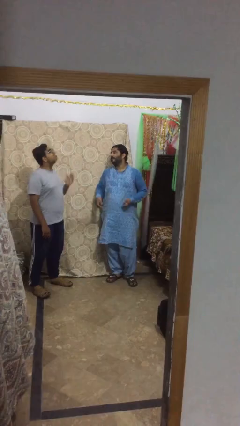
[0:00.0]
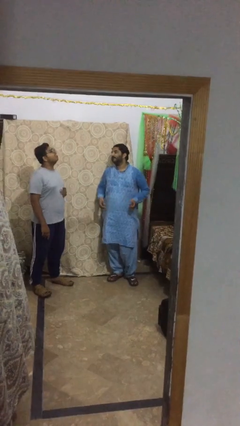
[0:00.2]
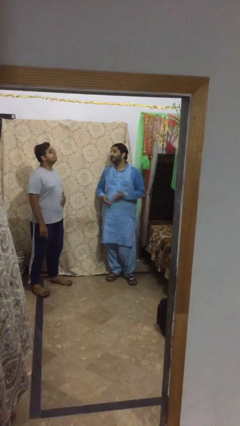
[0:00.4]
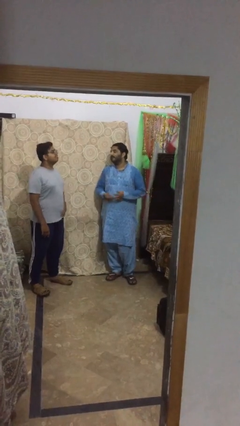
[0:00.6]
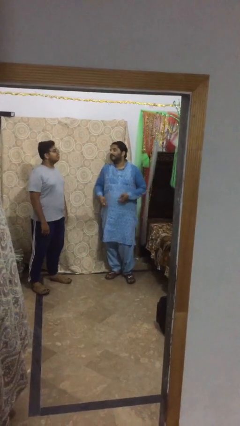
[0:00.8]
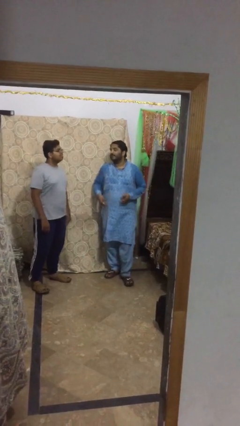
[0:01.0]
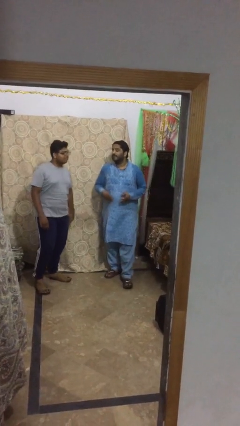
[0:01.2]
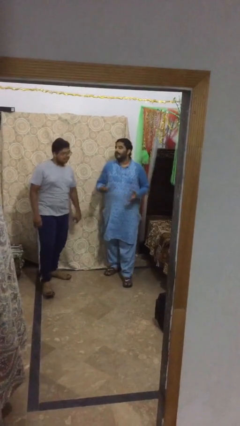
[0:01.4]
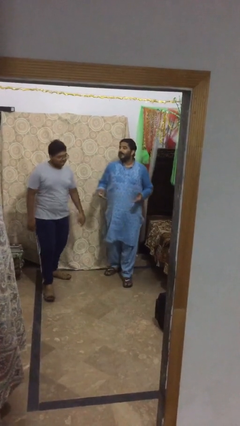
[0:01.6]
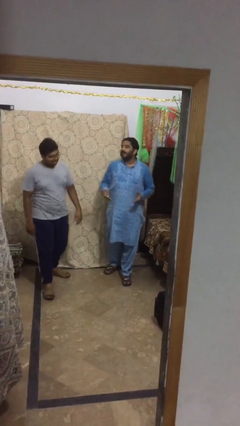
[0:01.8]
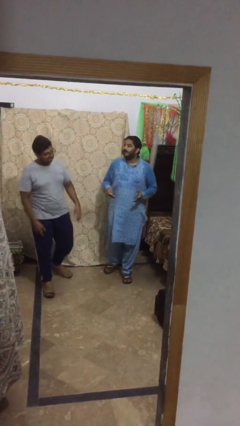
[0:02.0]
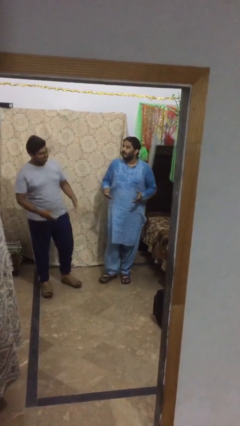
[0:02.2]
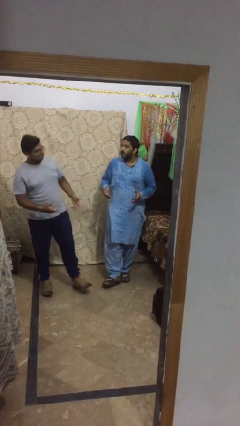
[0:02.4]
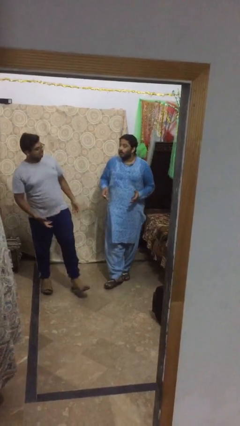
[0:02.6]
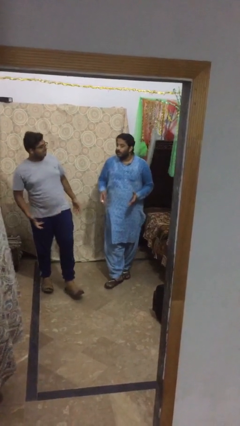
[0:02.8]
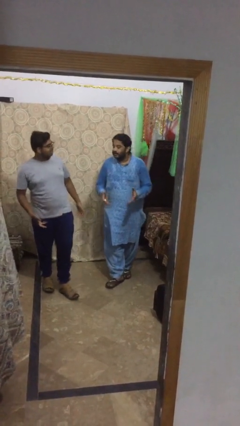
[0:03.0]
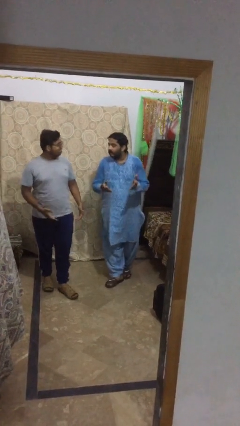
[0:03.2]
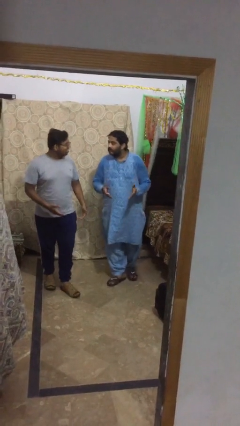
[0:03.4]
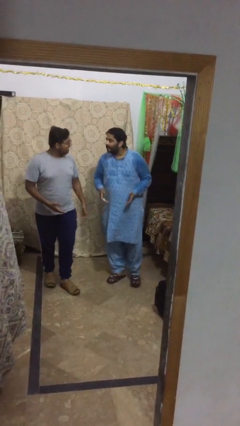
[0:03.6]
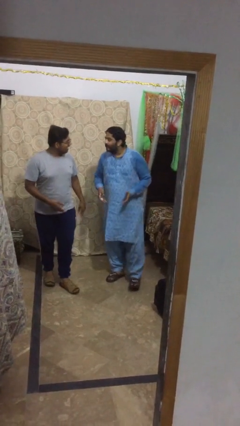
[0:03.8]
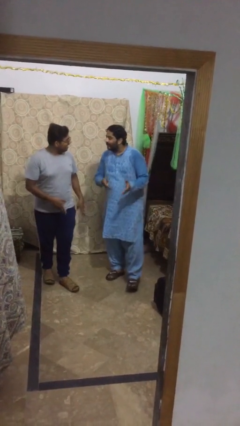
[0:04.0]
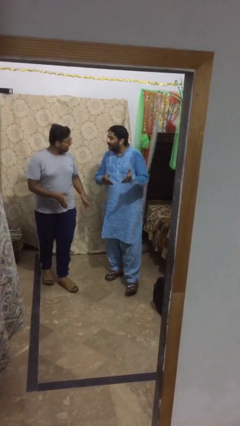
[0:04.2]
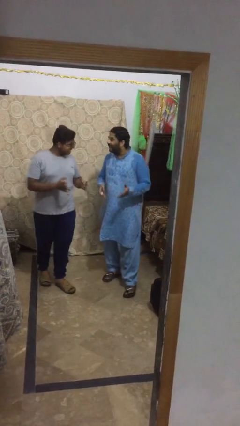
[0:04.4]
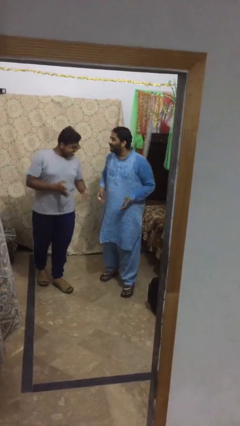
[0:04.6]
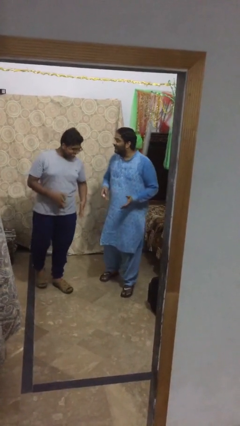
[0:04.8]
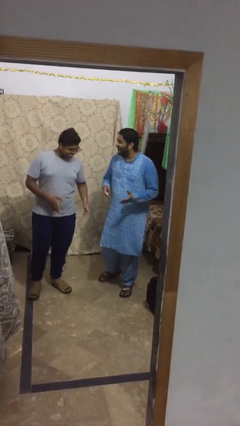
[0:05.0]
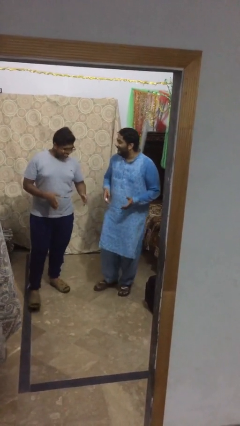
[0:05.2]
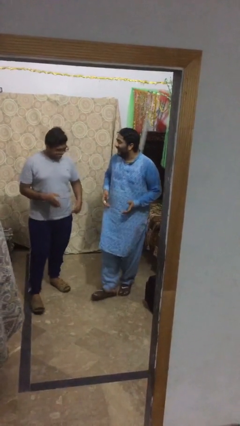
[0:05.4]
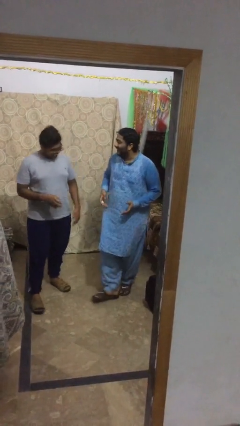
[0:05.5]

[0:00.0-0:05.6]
person talks to person

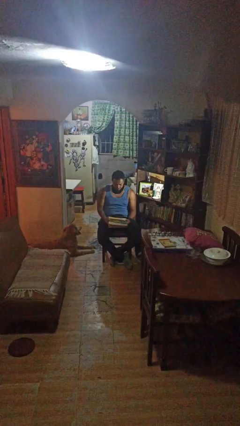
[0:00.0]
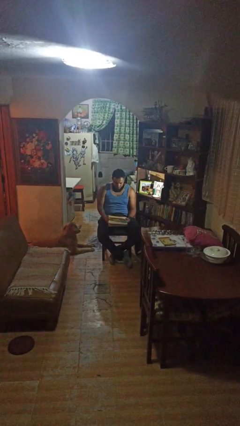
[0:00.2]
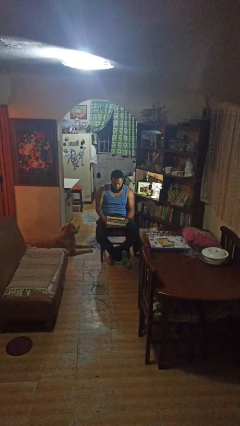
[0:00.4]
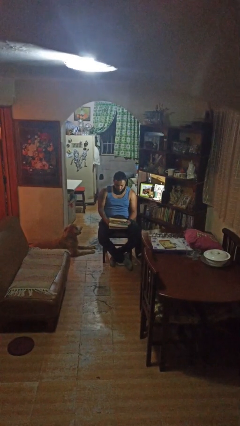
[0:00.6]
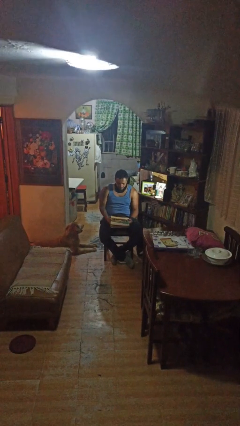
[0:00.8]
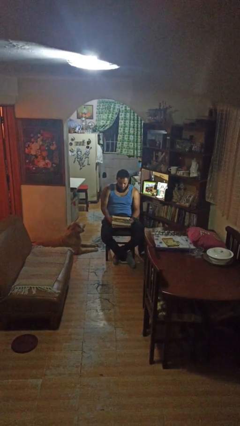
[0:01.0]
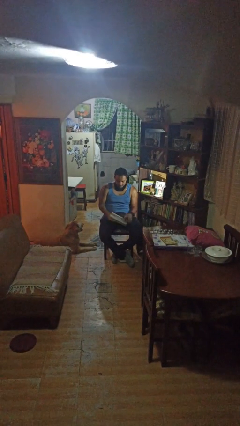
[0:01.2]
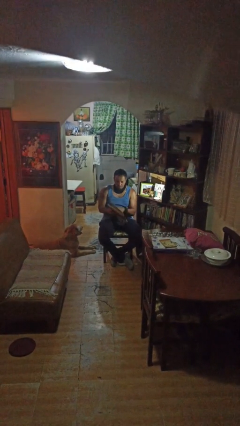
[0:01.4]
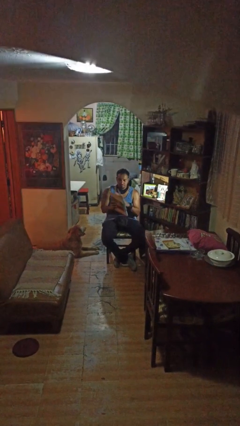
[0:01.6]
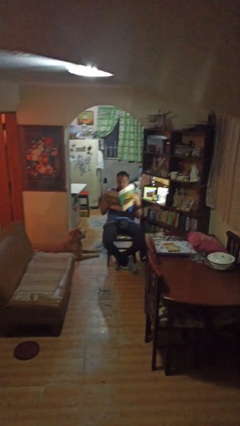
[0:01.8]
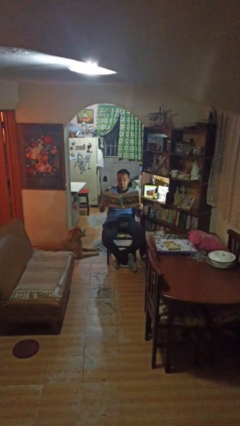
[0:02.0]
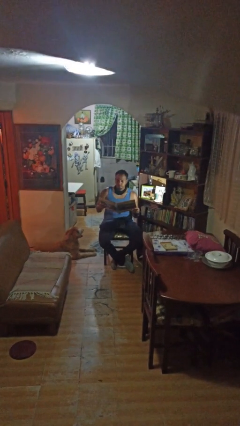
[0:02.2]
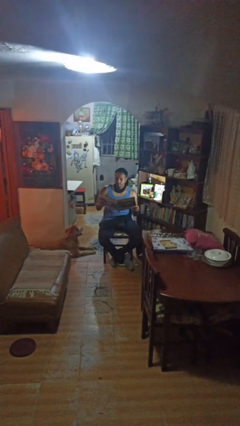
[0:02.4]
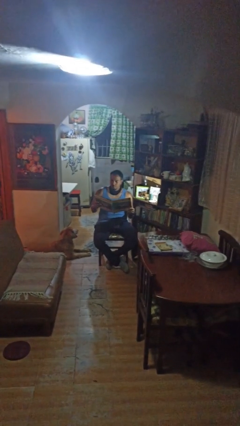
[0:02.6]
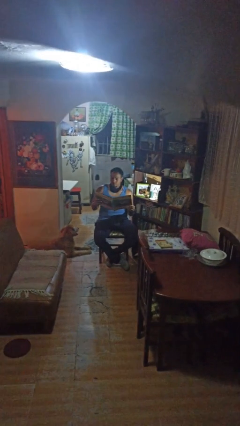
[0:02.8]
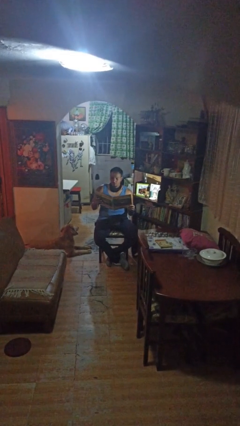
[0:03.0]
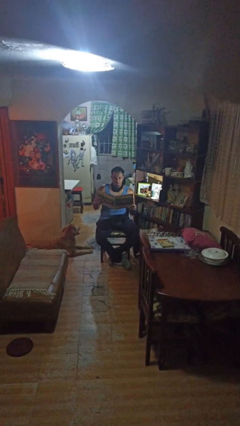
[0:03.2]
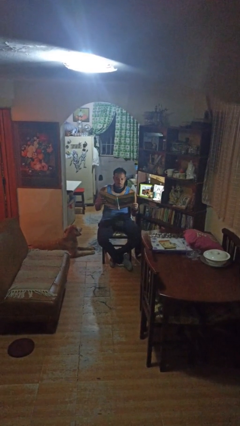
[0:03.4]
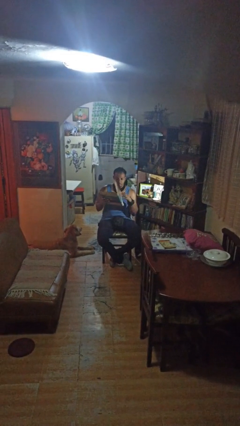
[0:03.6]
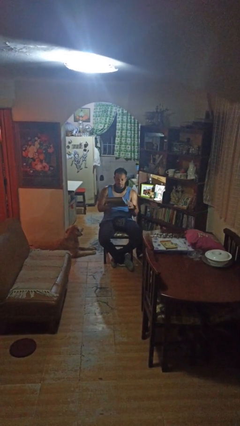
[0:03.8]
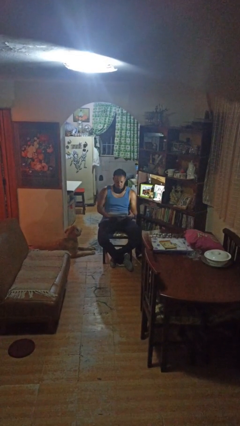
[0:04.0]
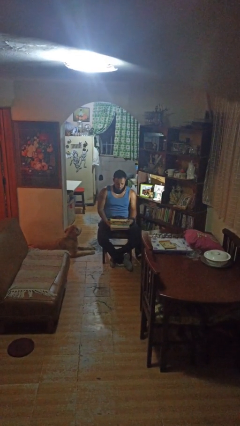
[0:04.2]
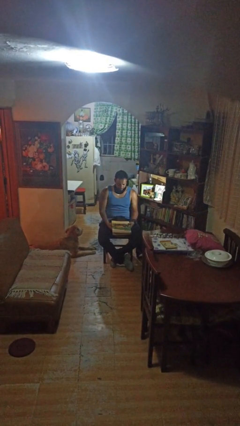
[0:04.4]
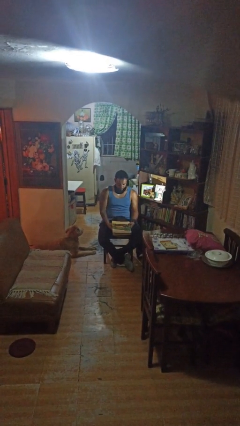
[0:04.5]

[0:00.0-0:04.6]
person reads document

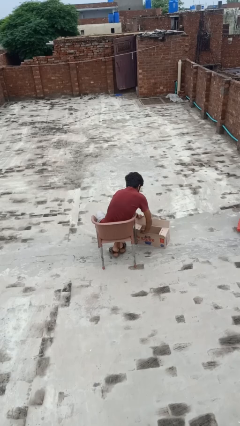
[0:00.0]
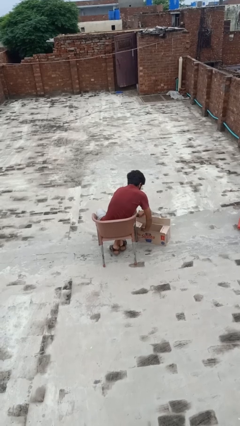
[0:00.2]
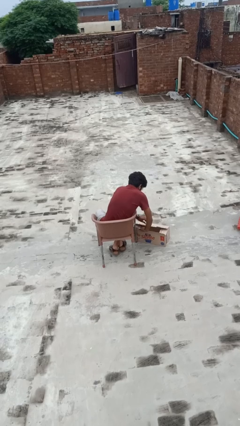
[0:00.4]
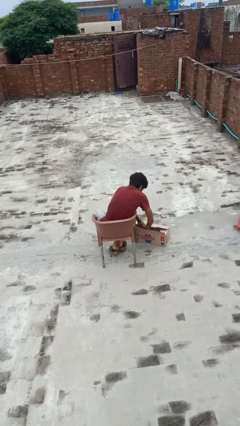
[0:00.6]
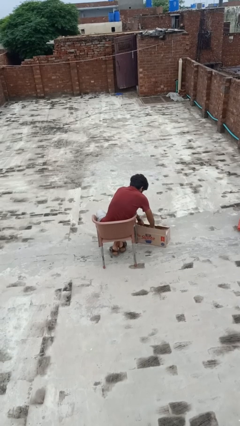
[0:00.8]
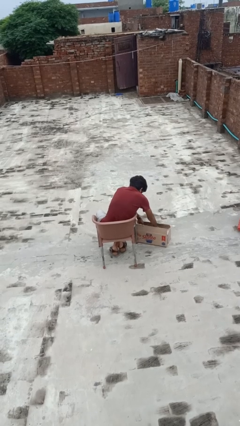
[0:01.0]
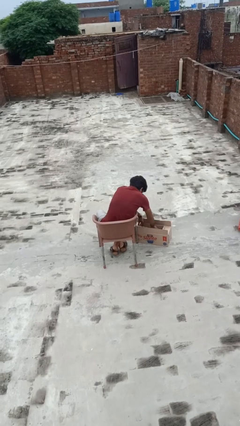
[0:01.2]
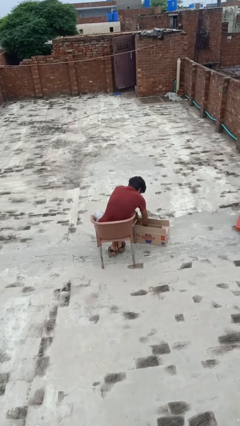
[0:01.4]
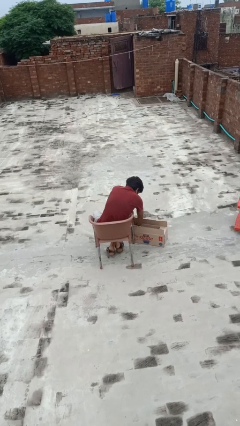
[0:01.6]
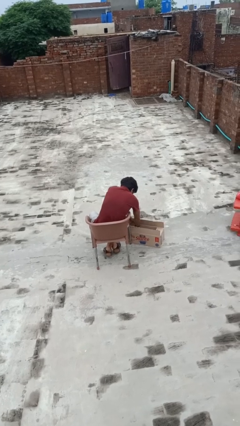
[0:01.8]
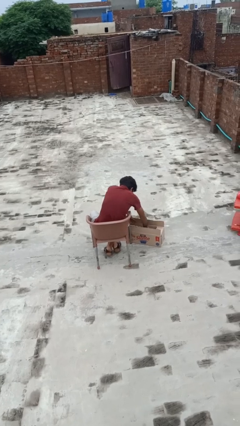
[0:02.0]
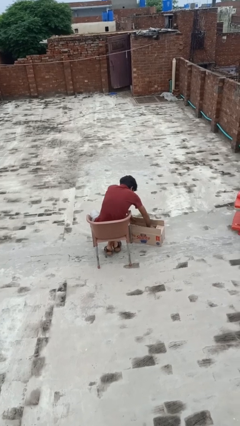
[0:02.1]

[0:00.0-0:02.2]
person searches in bag

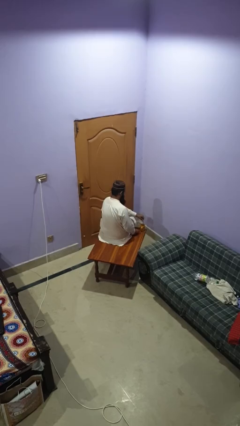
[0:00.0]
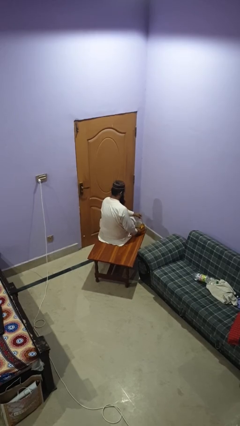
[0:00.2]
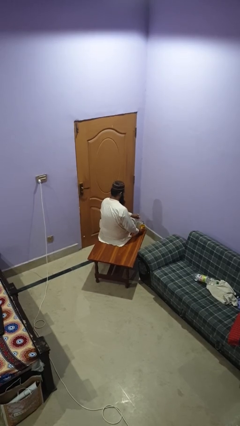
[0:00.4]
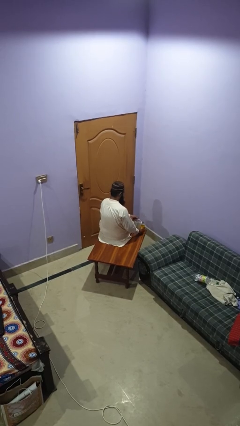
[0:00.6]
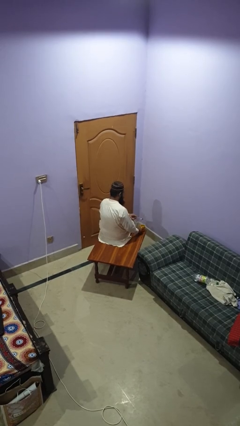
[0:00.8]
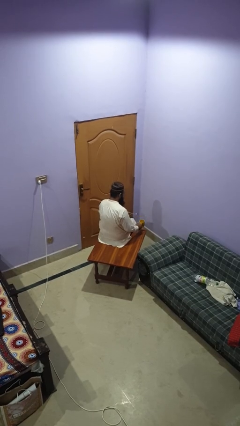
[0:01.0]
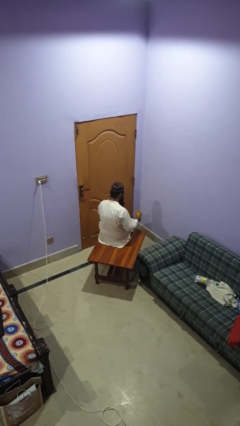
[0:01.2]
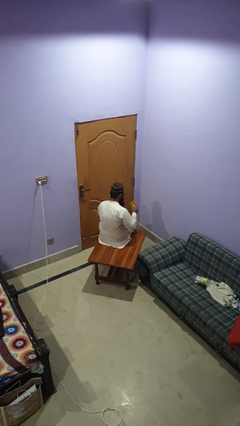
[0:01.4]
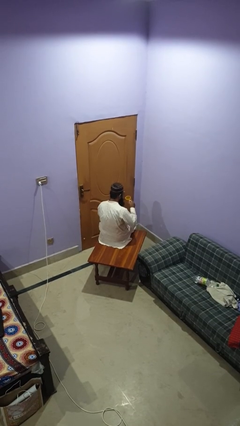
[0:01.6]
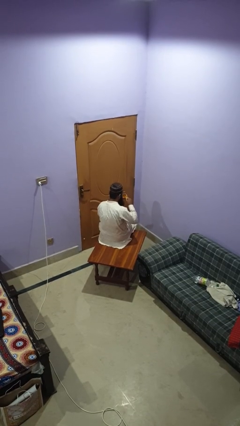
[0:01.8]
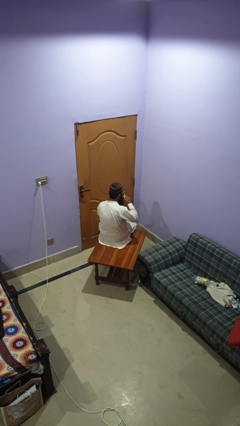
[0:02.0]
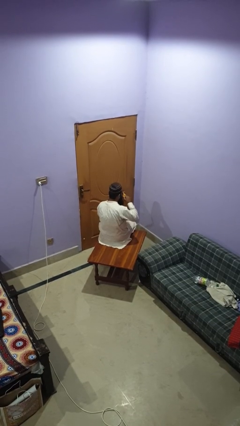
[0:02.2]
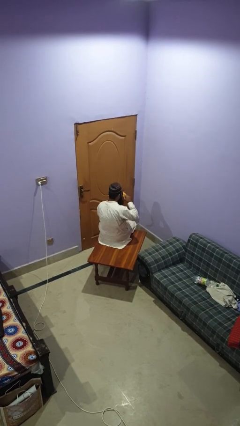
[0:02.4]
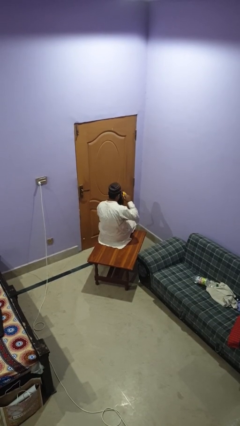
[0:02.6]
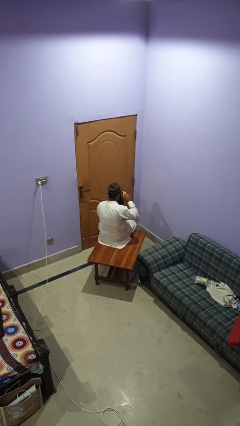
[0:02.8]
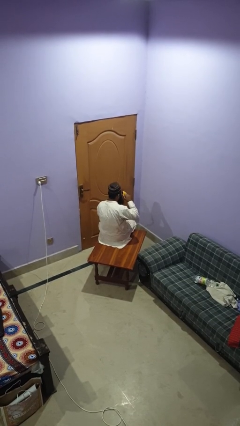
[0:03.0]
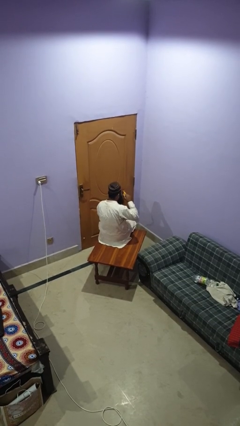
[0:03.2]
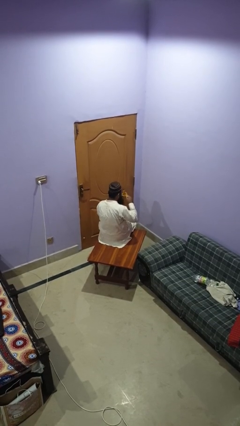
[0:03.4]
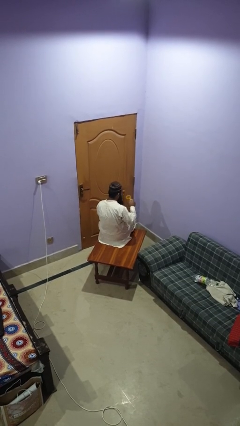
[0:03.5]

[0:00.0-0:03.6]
person drinks from mug

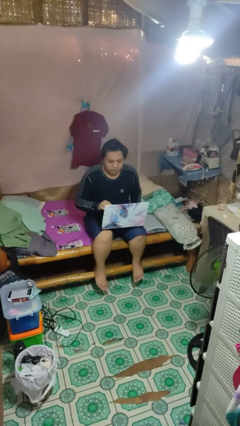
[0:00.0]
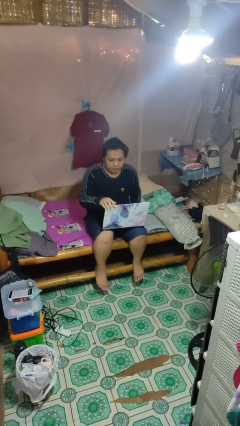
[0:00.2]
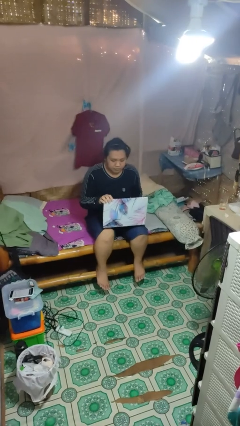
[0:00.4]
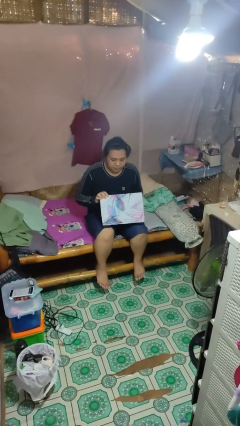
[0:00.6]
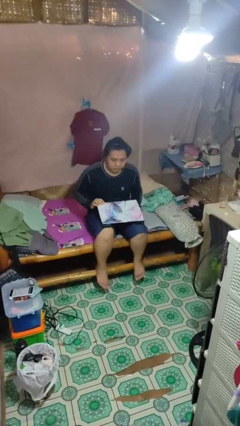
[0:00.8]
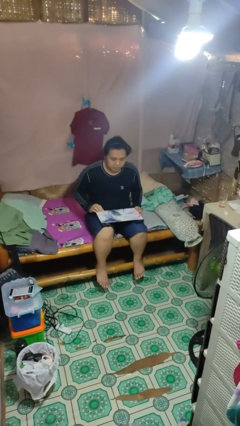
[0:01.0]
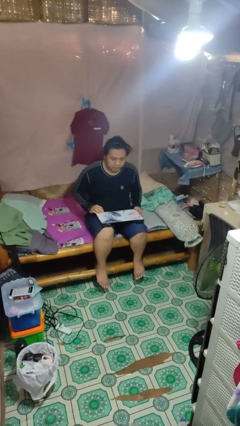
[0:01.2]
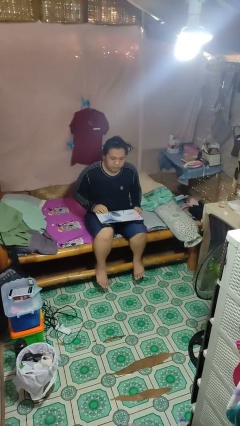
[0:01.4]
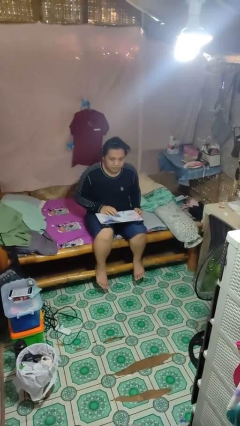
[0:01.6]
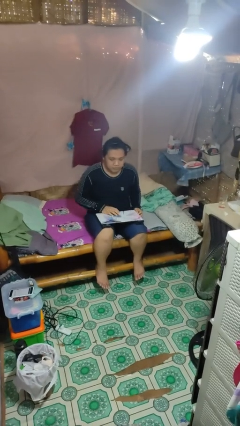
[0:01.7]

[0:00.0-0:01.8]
person closes laptop
